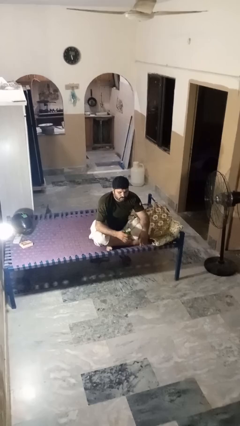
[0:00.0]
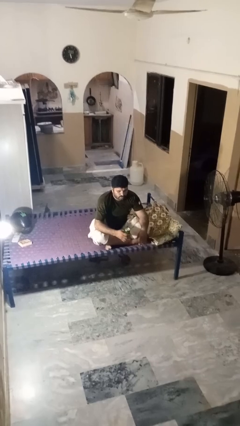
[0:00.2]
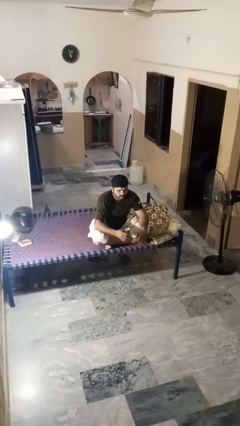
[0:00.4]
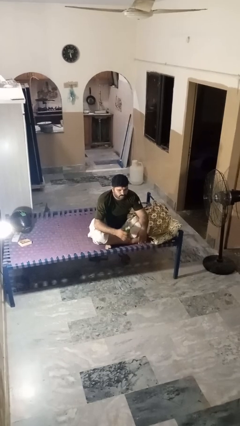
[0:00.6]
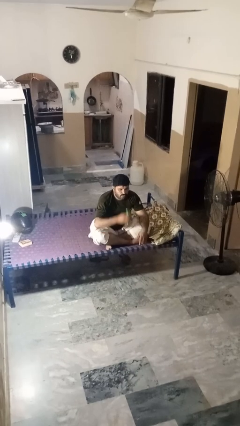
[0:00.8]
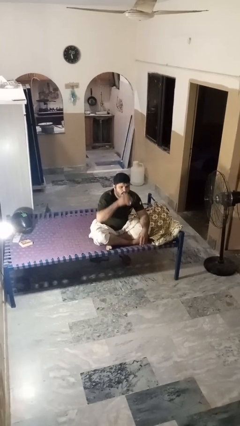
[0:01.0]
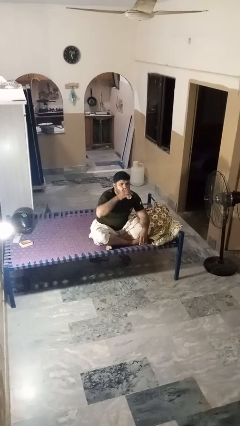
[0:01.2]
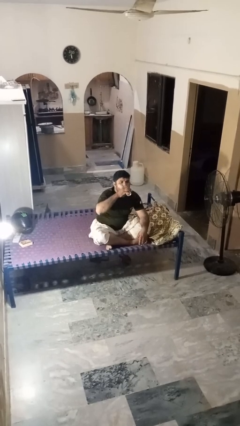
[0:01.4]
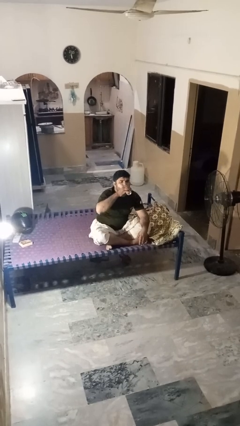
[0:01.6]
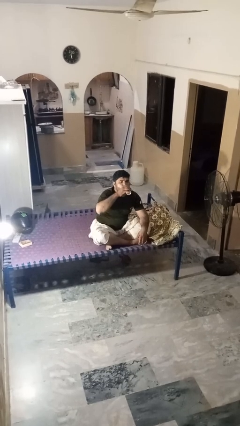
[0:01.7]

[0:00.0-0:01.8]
person drinks from beverage can

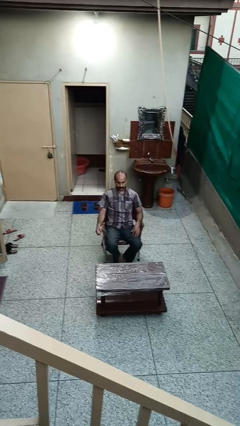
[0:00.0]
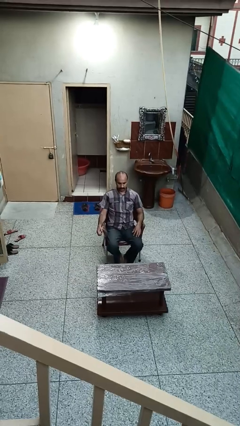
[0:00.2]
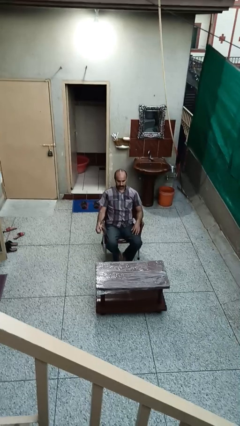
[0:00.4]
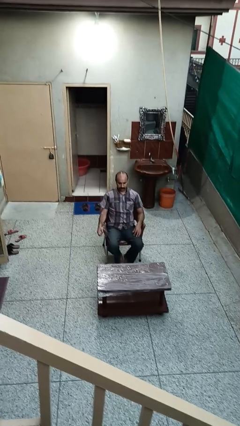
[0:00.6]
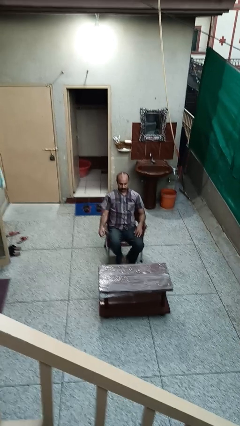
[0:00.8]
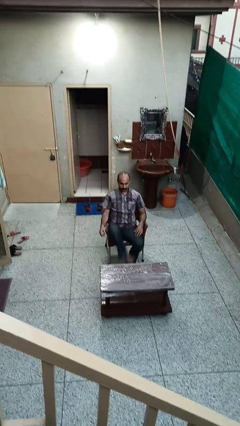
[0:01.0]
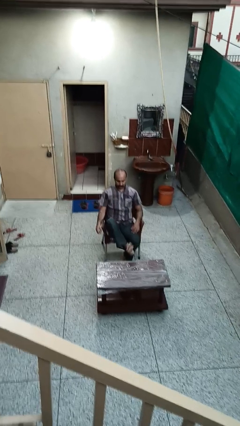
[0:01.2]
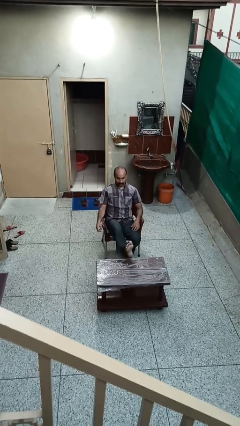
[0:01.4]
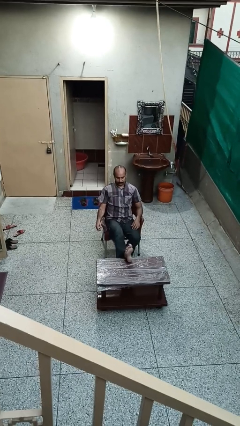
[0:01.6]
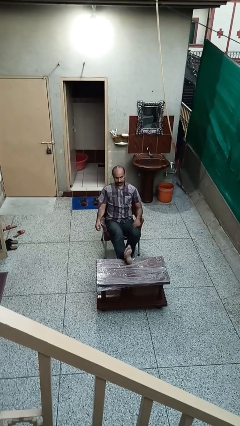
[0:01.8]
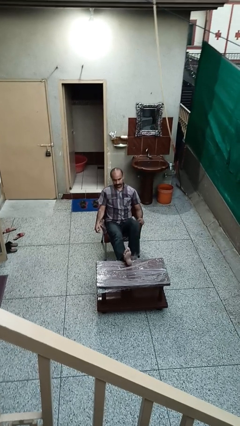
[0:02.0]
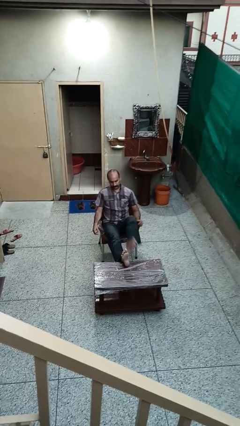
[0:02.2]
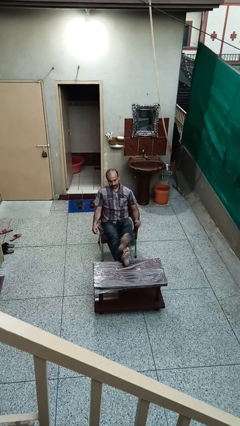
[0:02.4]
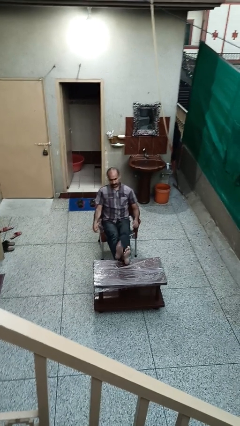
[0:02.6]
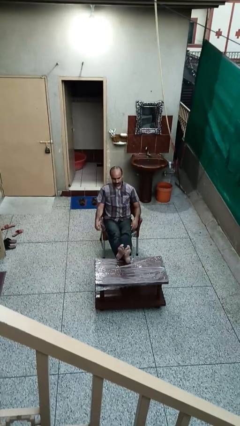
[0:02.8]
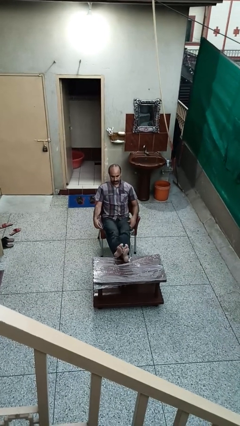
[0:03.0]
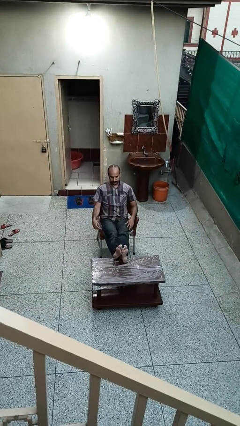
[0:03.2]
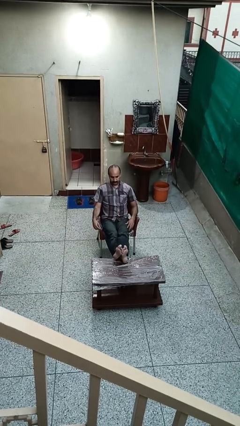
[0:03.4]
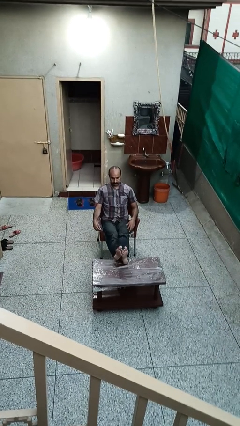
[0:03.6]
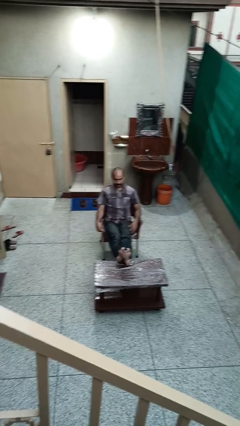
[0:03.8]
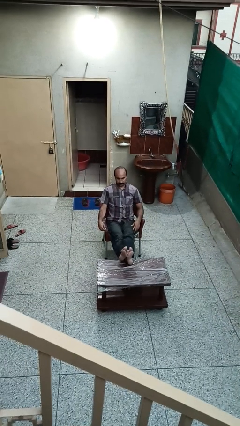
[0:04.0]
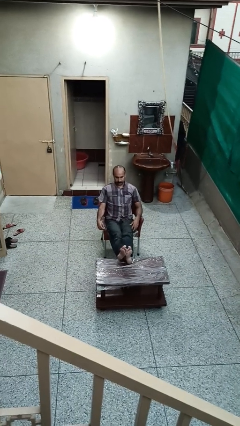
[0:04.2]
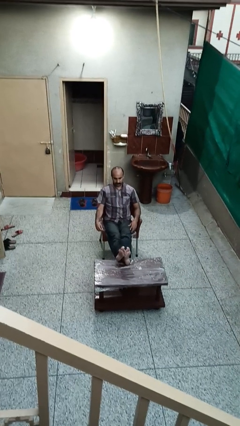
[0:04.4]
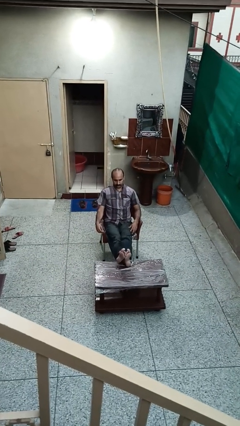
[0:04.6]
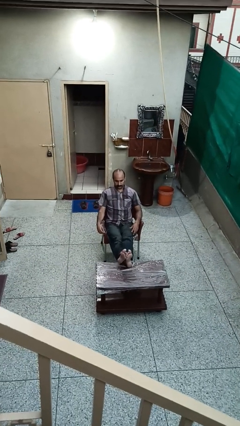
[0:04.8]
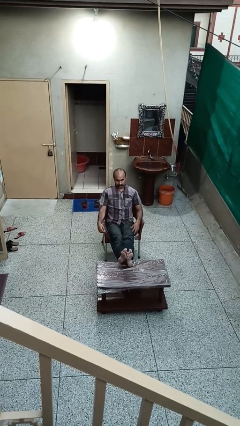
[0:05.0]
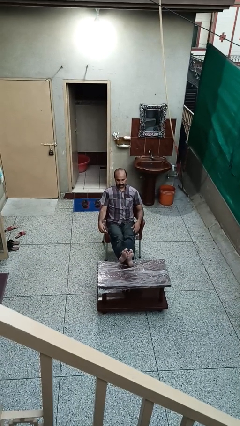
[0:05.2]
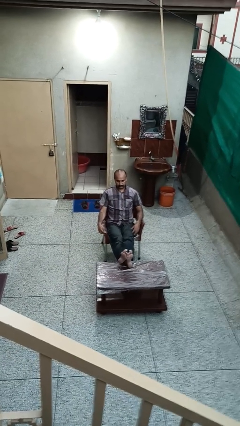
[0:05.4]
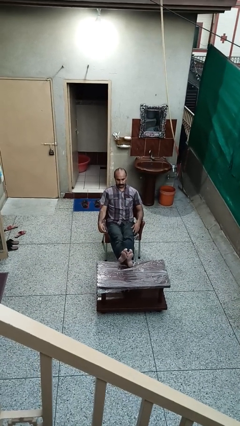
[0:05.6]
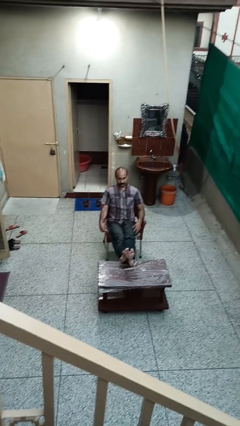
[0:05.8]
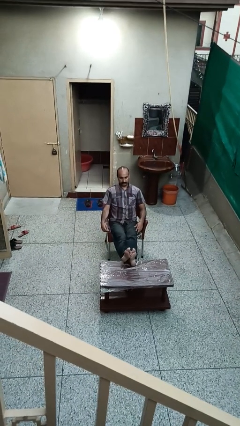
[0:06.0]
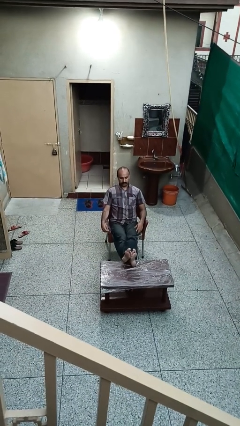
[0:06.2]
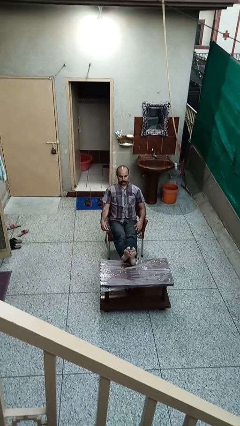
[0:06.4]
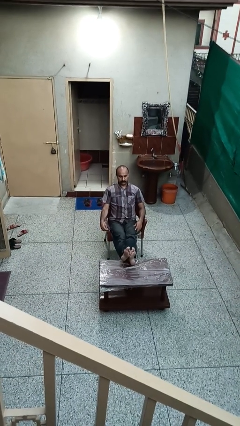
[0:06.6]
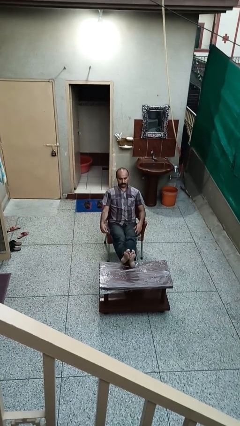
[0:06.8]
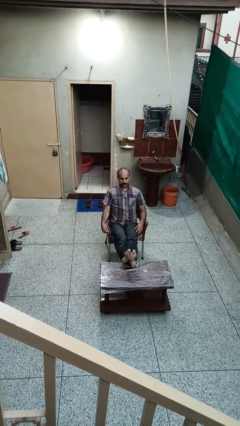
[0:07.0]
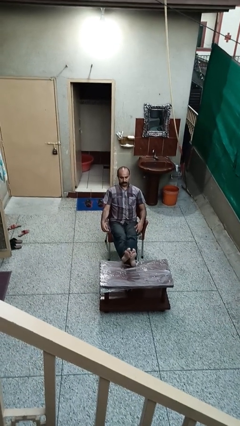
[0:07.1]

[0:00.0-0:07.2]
person puts feet up

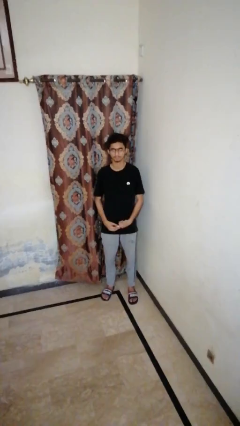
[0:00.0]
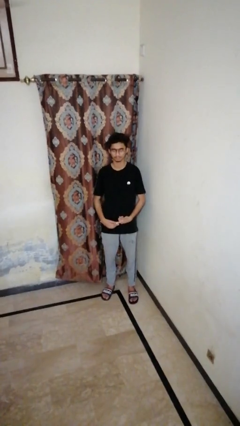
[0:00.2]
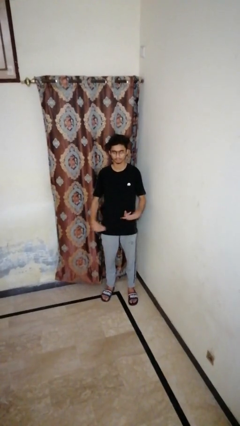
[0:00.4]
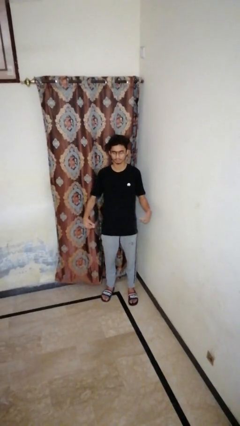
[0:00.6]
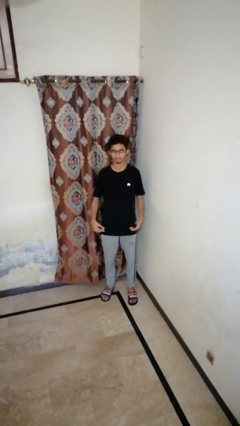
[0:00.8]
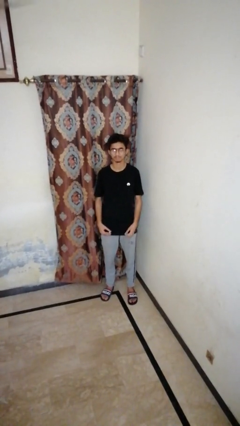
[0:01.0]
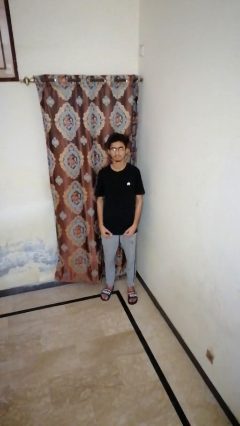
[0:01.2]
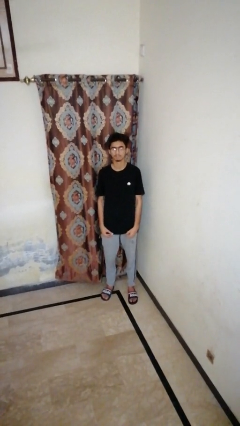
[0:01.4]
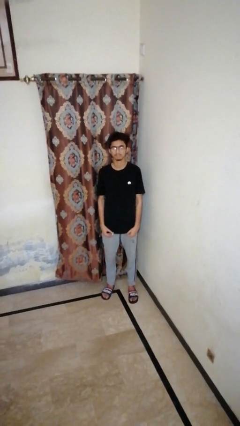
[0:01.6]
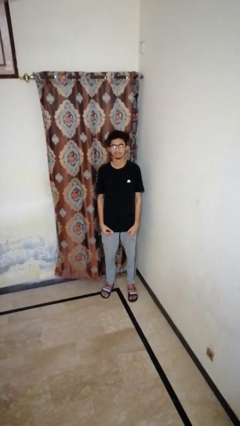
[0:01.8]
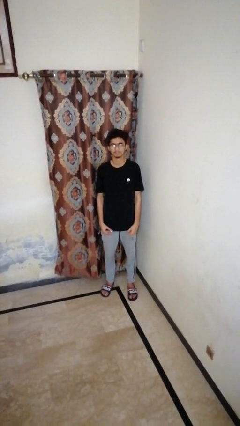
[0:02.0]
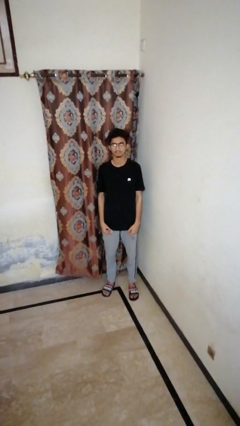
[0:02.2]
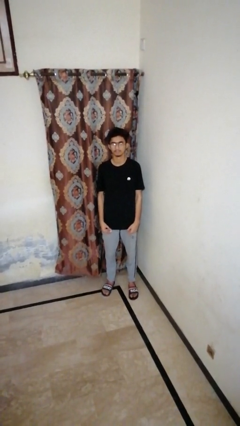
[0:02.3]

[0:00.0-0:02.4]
person takes off ring

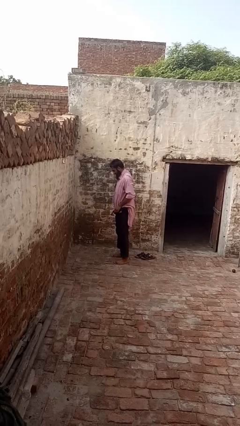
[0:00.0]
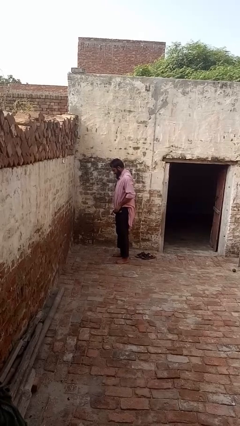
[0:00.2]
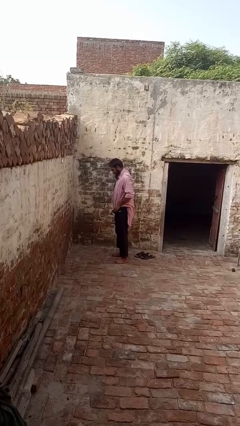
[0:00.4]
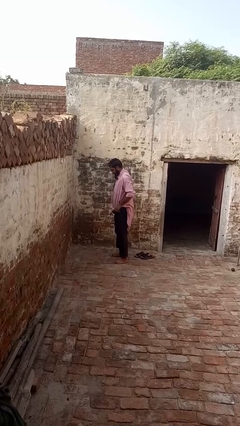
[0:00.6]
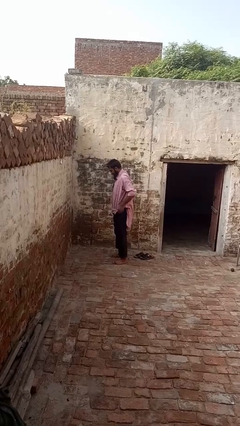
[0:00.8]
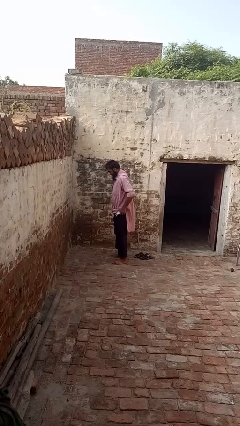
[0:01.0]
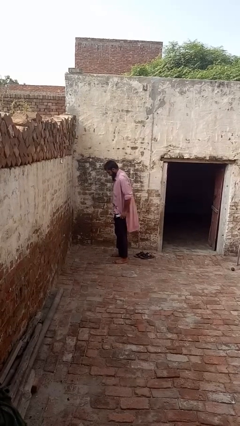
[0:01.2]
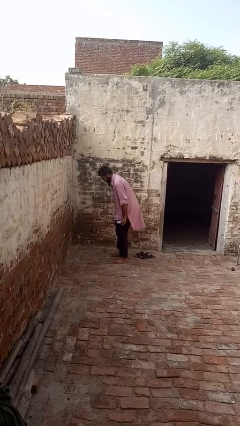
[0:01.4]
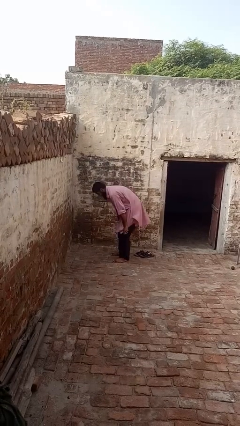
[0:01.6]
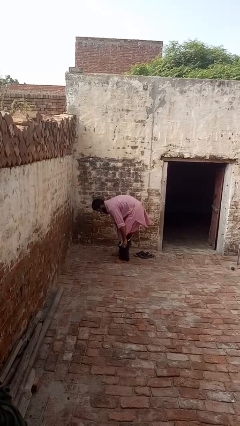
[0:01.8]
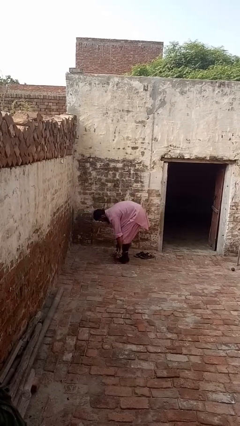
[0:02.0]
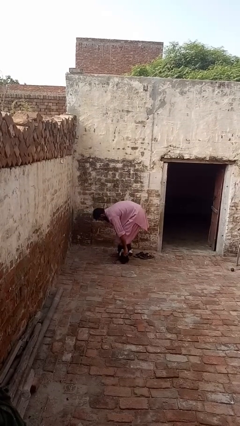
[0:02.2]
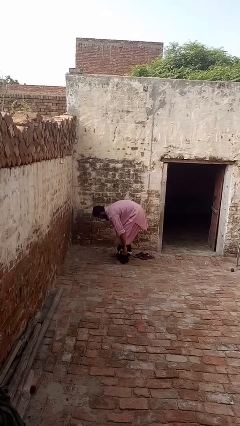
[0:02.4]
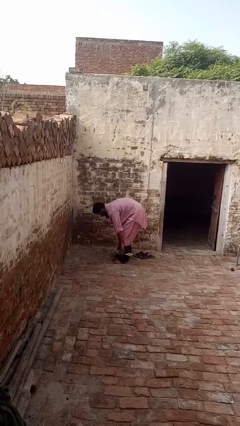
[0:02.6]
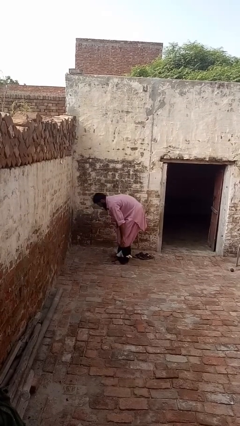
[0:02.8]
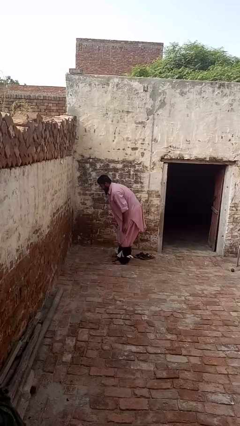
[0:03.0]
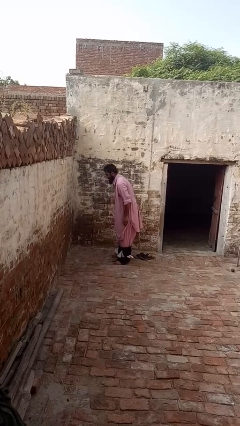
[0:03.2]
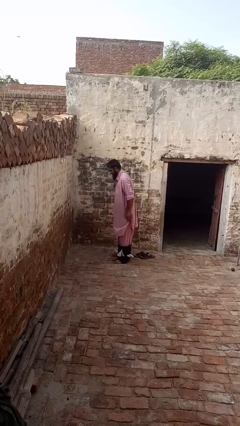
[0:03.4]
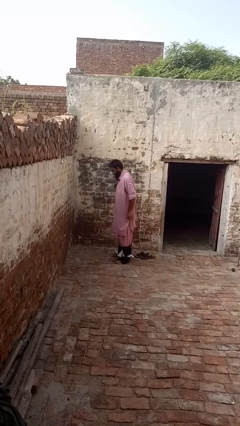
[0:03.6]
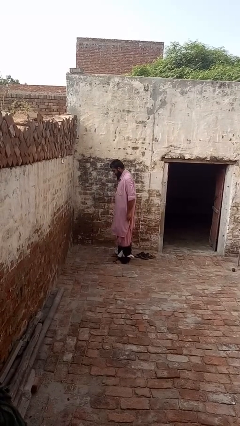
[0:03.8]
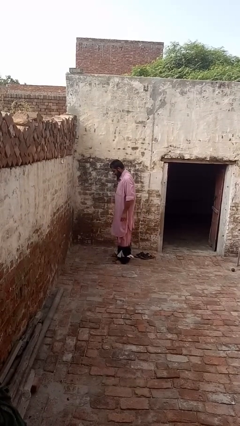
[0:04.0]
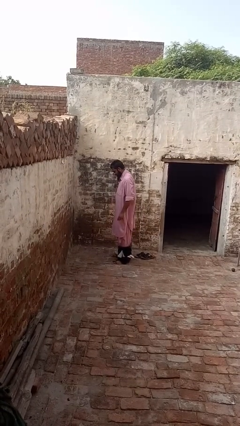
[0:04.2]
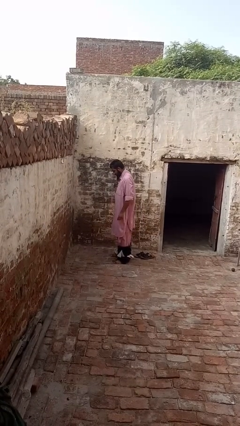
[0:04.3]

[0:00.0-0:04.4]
person takes off pants

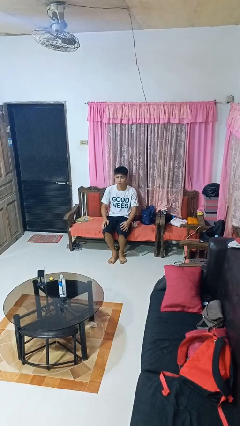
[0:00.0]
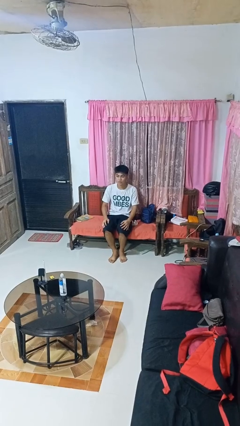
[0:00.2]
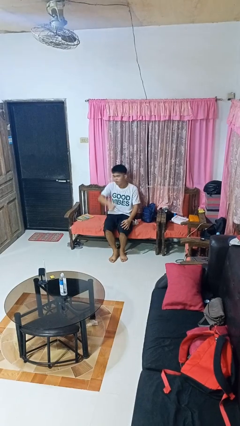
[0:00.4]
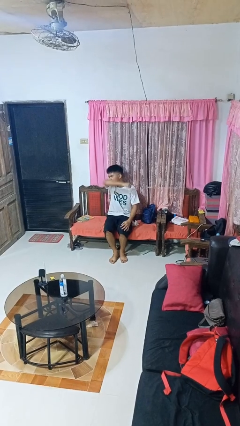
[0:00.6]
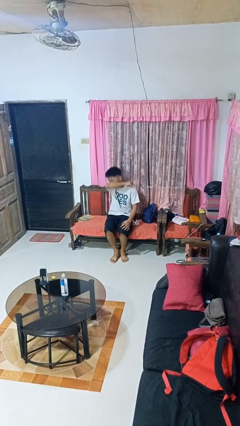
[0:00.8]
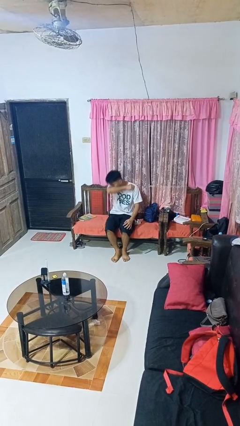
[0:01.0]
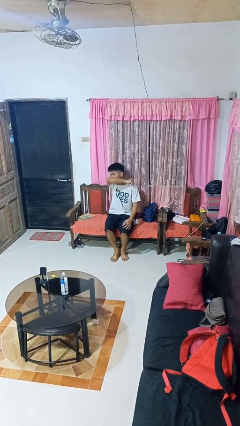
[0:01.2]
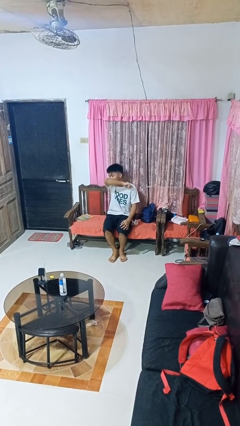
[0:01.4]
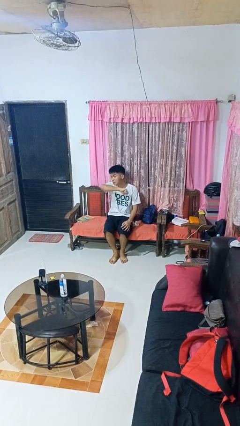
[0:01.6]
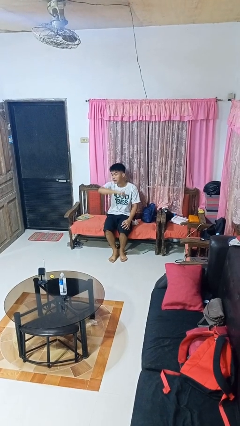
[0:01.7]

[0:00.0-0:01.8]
person sneezes into arm

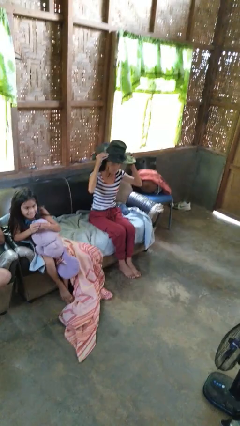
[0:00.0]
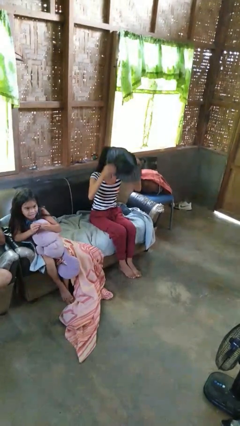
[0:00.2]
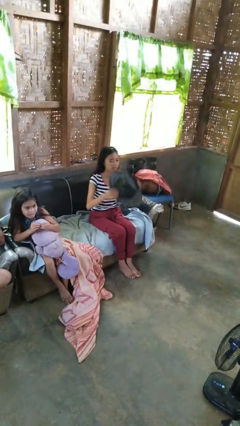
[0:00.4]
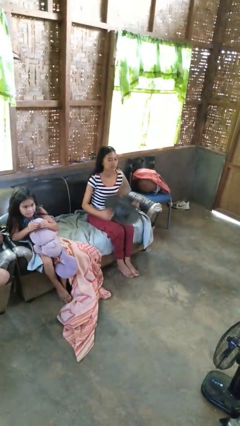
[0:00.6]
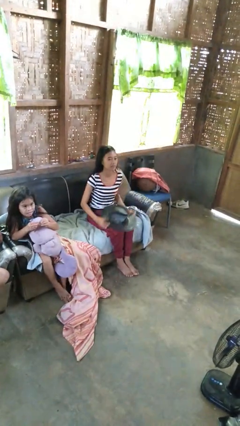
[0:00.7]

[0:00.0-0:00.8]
person takes off hat
